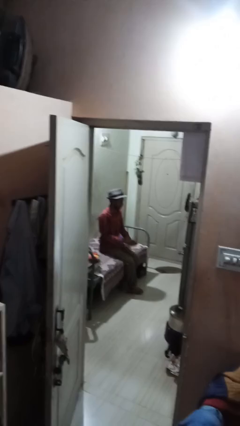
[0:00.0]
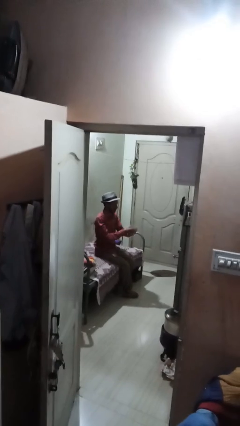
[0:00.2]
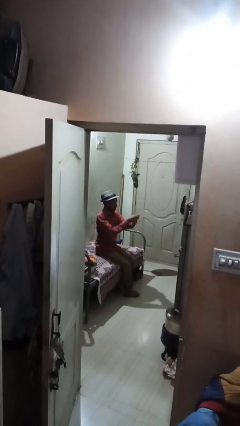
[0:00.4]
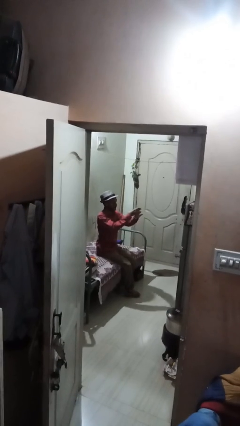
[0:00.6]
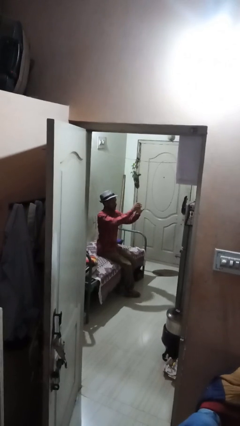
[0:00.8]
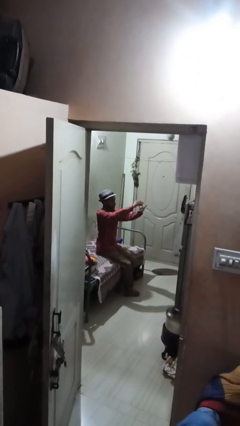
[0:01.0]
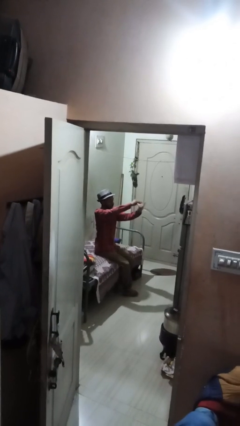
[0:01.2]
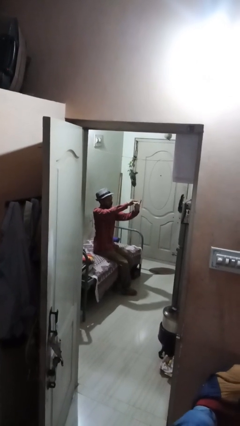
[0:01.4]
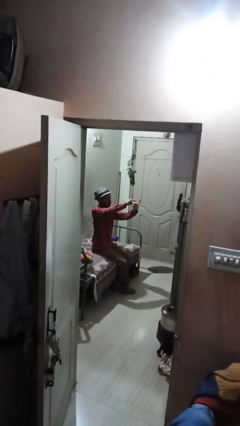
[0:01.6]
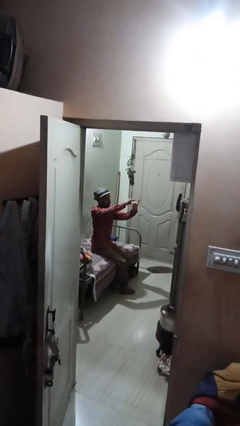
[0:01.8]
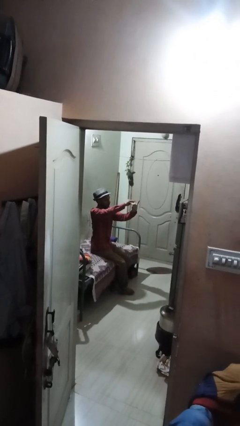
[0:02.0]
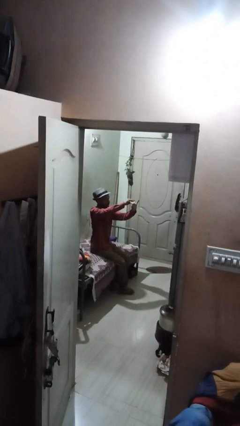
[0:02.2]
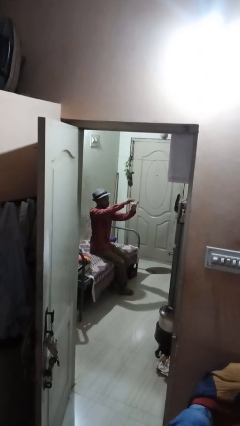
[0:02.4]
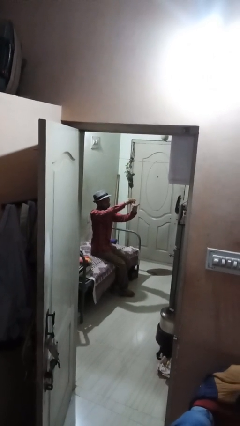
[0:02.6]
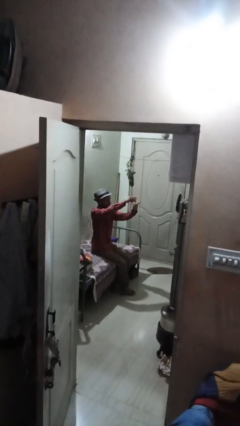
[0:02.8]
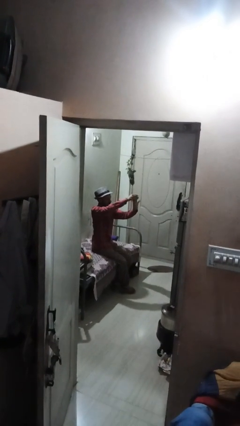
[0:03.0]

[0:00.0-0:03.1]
person cracks knuckles

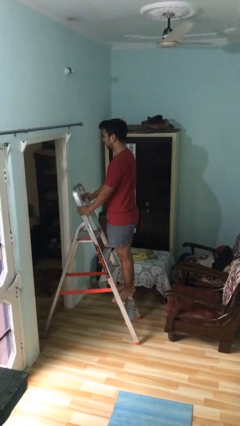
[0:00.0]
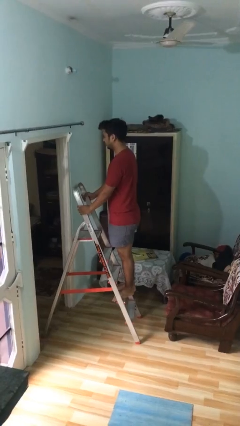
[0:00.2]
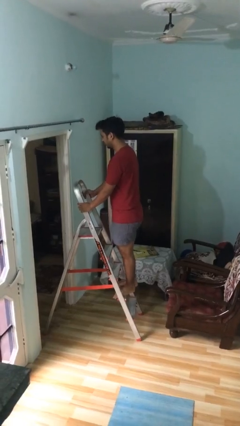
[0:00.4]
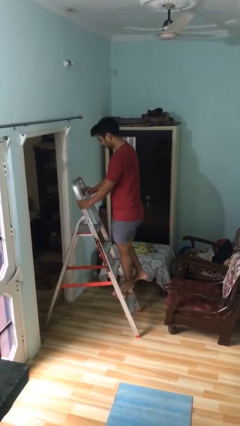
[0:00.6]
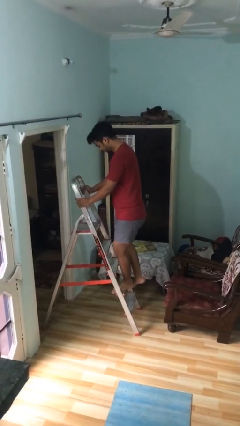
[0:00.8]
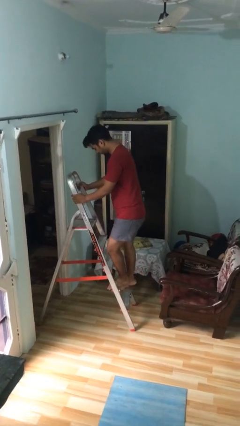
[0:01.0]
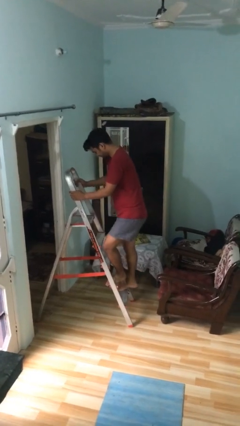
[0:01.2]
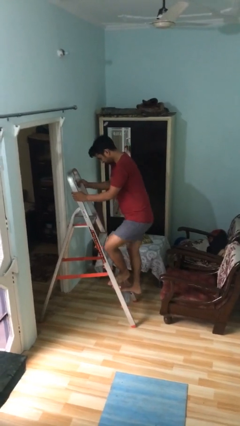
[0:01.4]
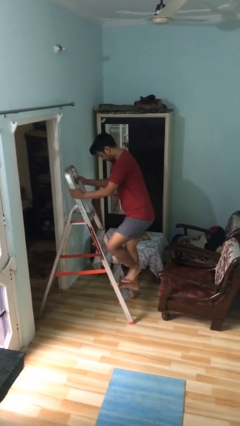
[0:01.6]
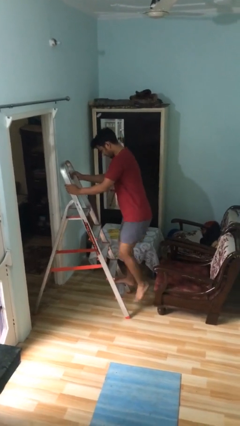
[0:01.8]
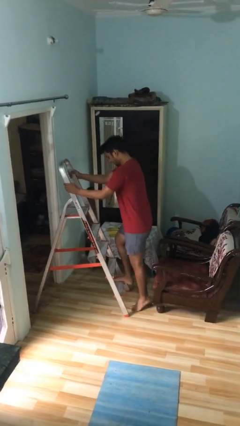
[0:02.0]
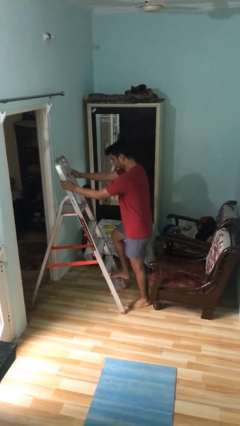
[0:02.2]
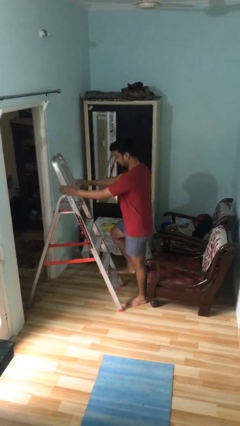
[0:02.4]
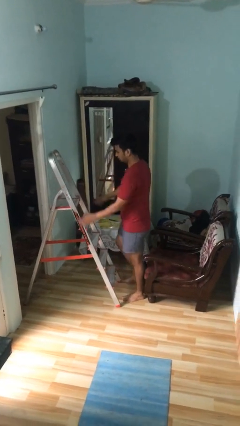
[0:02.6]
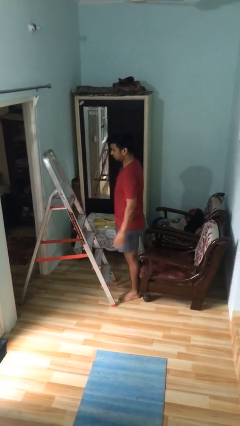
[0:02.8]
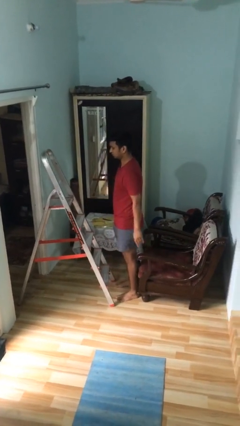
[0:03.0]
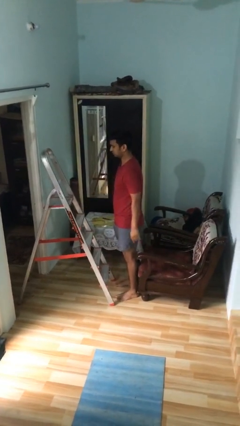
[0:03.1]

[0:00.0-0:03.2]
person climbs down ladder

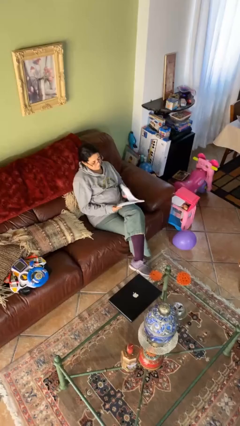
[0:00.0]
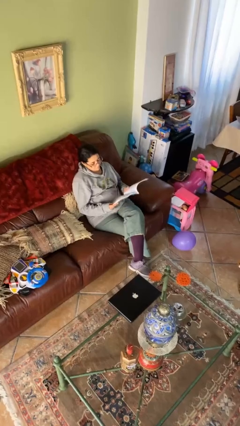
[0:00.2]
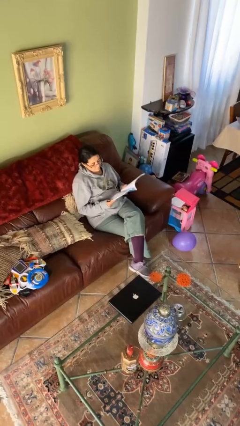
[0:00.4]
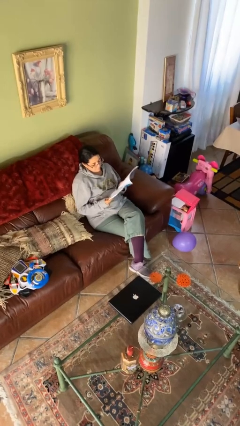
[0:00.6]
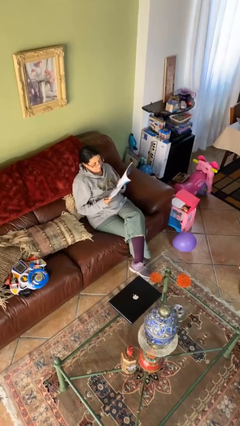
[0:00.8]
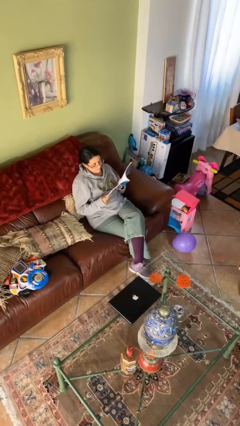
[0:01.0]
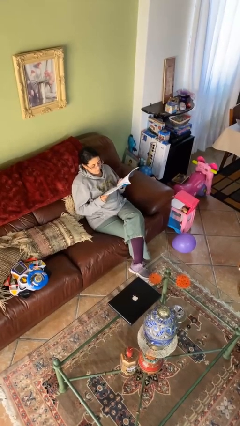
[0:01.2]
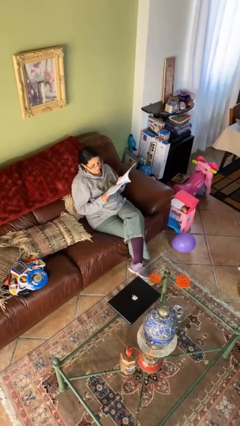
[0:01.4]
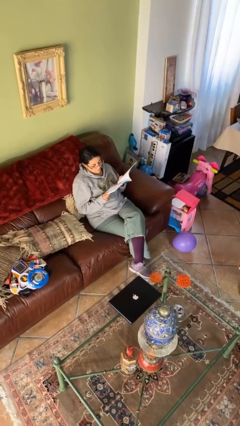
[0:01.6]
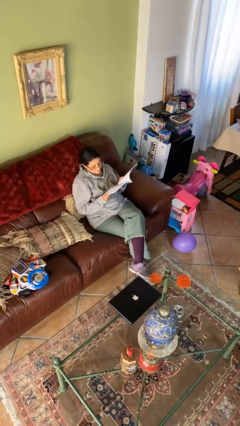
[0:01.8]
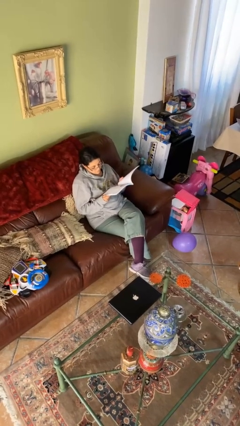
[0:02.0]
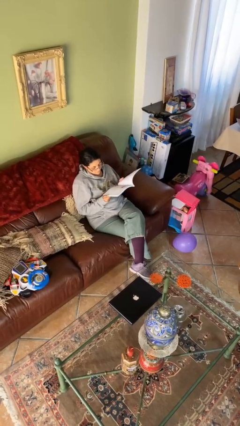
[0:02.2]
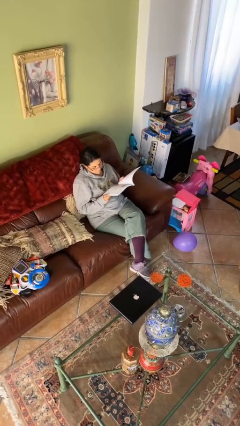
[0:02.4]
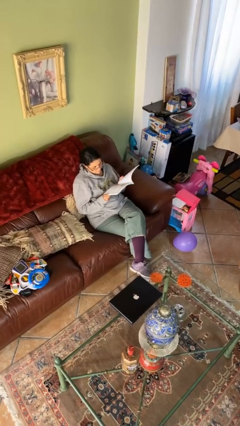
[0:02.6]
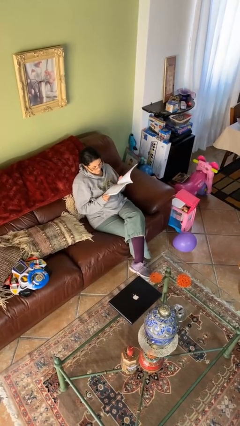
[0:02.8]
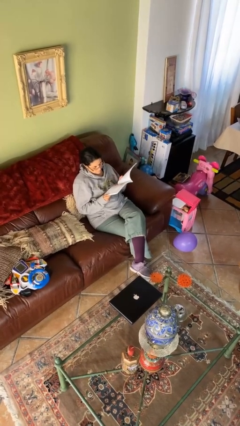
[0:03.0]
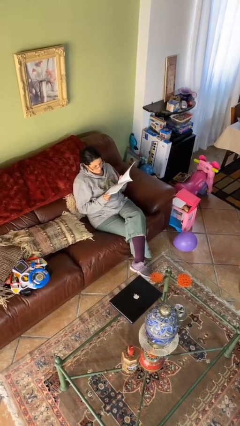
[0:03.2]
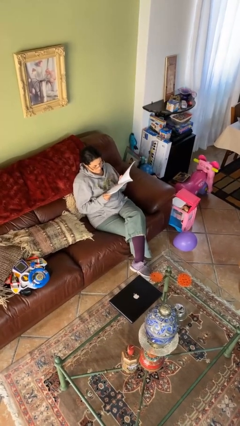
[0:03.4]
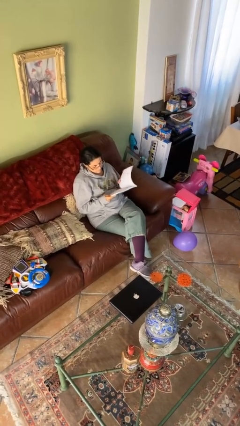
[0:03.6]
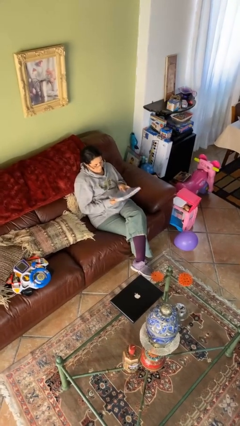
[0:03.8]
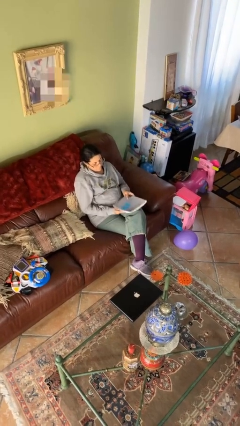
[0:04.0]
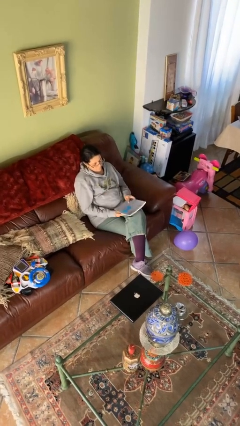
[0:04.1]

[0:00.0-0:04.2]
person reads document

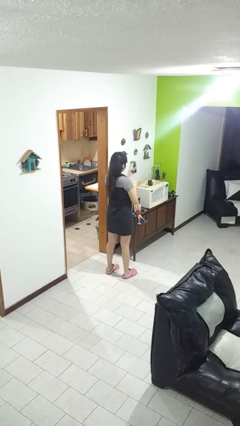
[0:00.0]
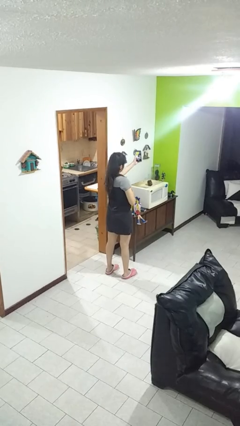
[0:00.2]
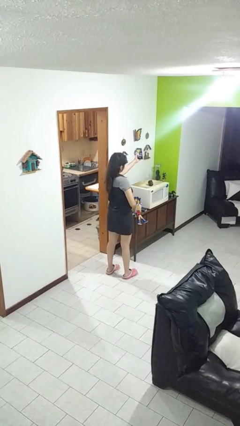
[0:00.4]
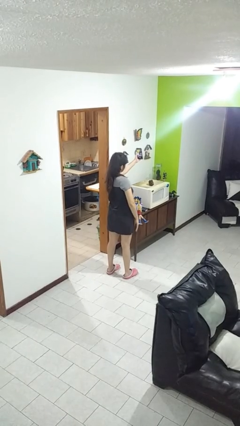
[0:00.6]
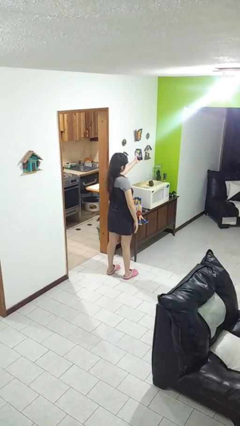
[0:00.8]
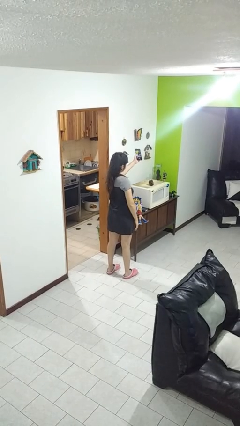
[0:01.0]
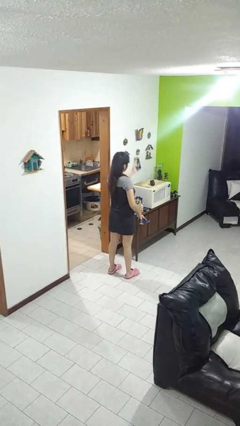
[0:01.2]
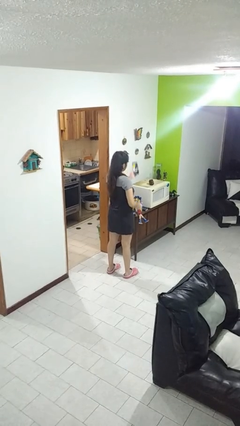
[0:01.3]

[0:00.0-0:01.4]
person takes selfie

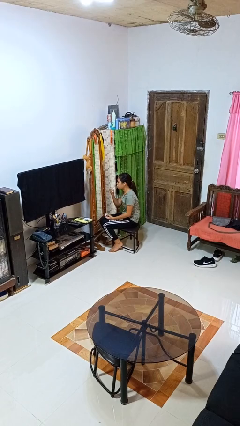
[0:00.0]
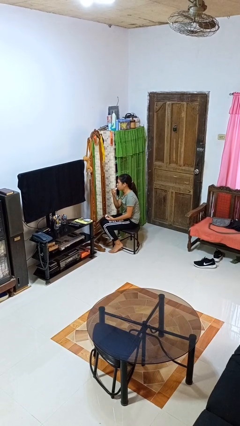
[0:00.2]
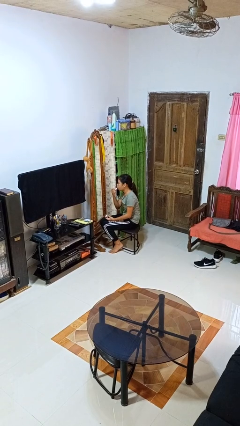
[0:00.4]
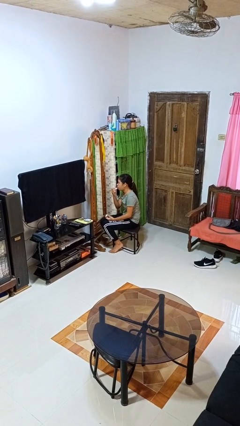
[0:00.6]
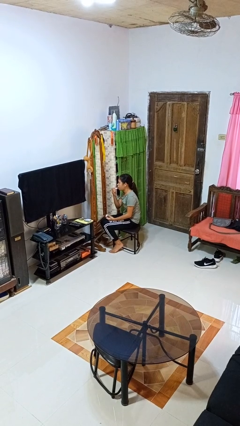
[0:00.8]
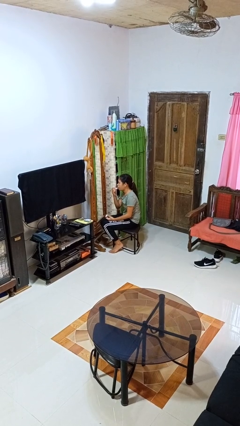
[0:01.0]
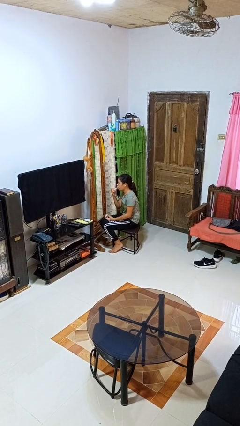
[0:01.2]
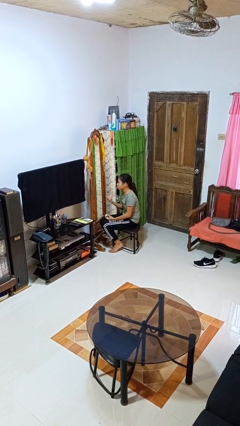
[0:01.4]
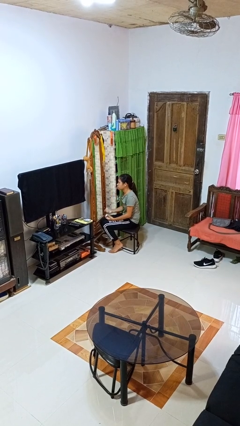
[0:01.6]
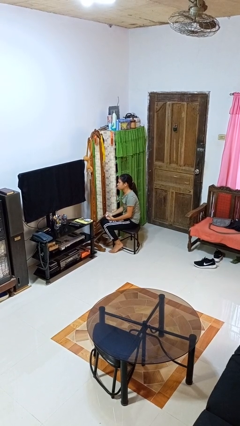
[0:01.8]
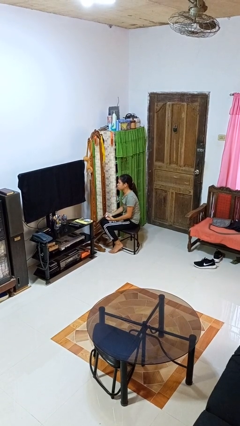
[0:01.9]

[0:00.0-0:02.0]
person applies lip makeup

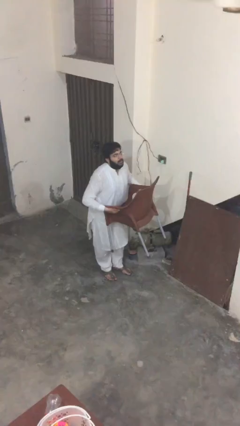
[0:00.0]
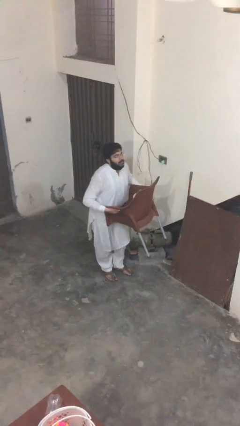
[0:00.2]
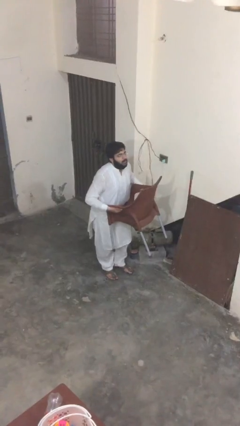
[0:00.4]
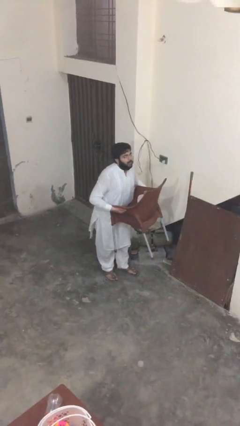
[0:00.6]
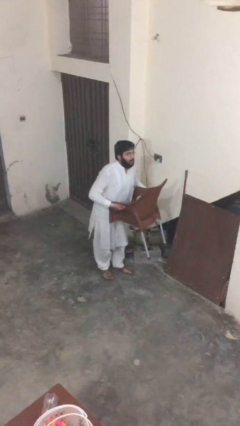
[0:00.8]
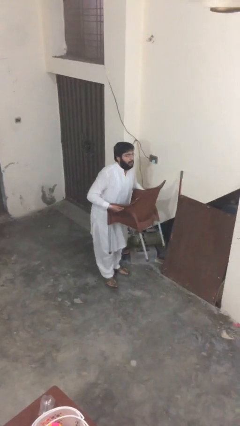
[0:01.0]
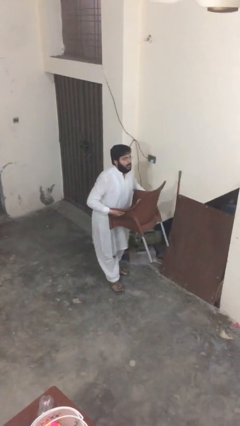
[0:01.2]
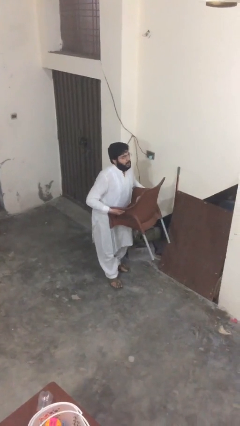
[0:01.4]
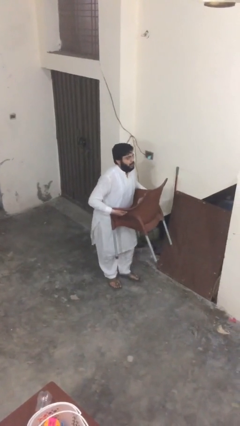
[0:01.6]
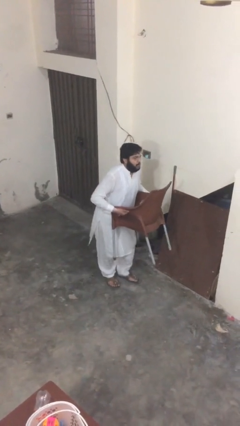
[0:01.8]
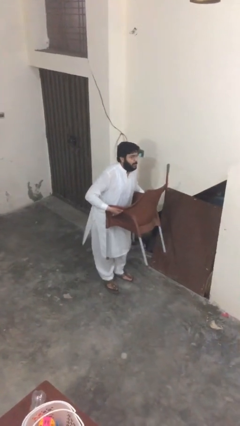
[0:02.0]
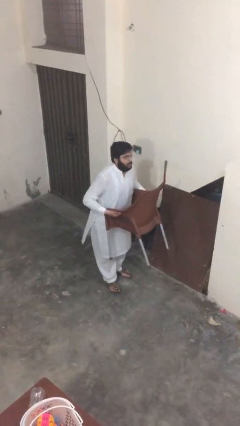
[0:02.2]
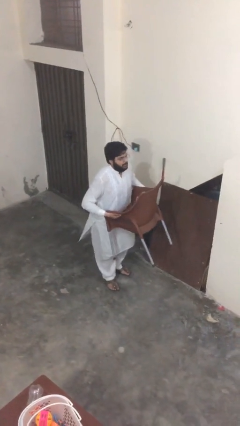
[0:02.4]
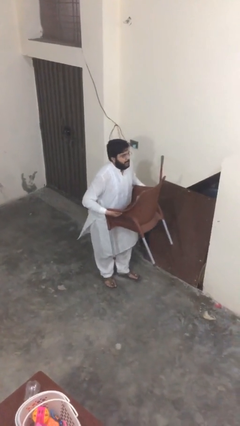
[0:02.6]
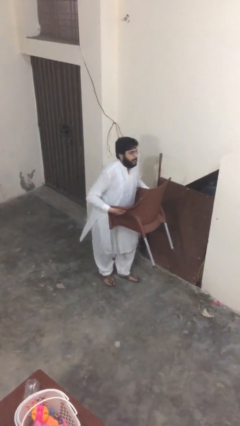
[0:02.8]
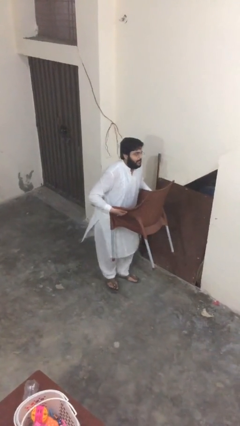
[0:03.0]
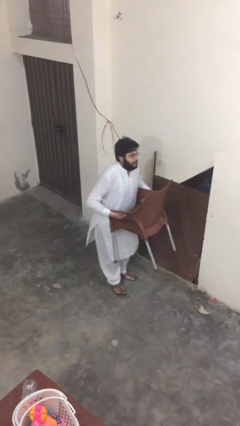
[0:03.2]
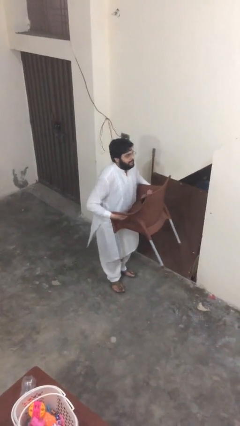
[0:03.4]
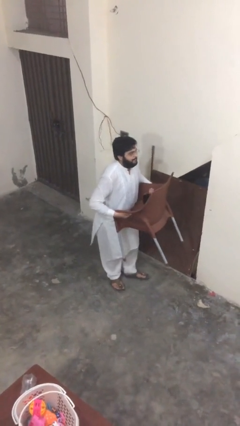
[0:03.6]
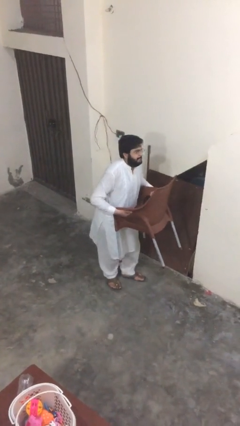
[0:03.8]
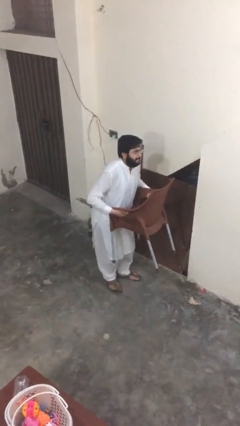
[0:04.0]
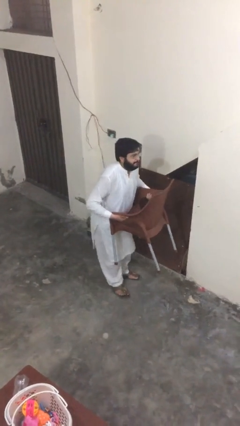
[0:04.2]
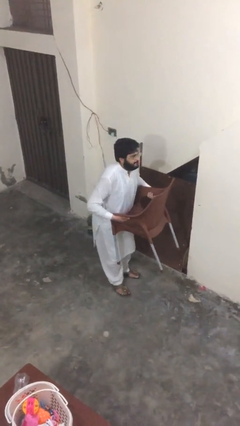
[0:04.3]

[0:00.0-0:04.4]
person carries heavy object
